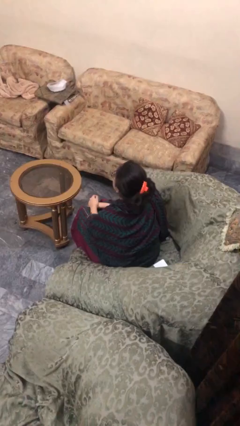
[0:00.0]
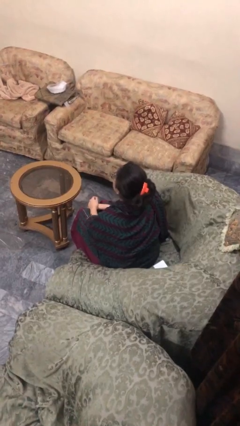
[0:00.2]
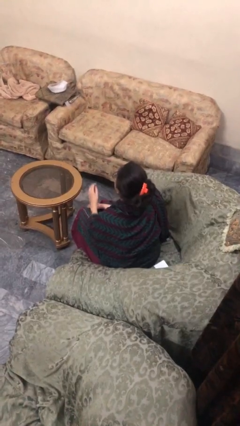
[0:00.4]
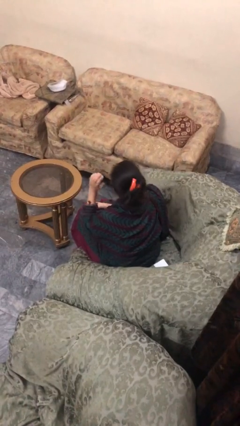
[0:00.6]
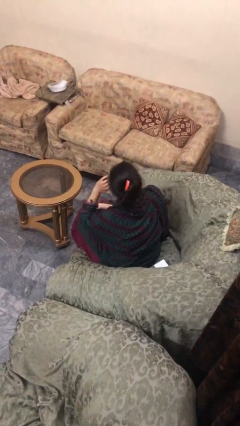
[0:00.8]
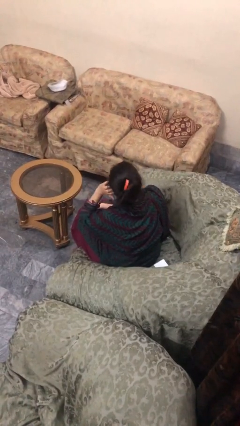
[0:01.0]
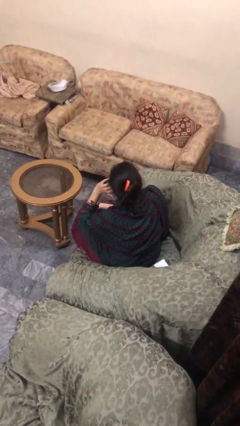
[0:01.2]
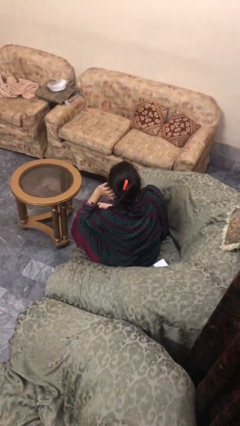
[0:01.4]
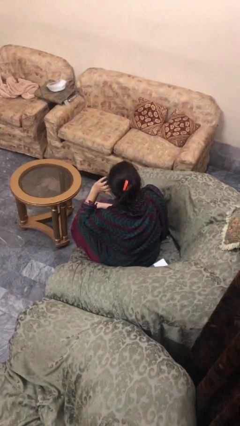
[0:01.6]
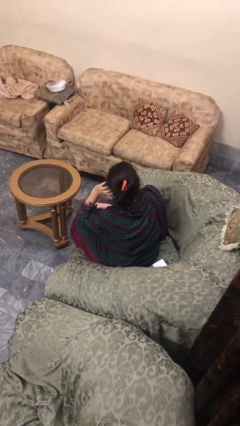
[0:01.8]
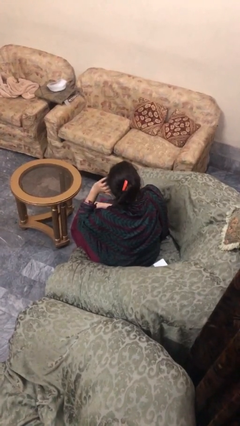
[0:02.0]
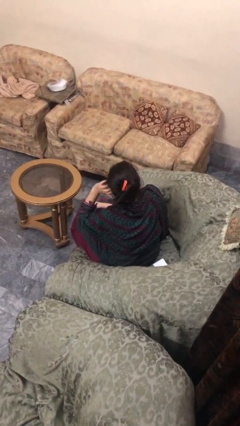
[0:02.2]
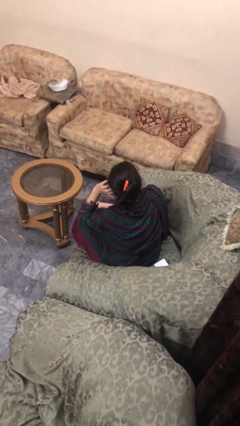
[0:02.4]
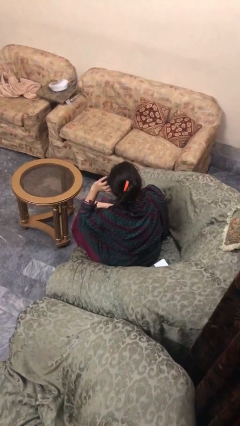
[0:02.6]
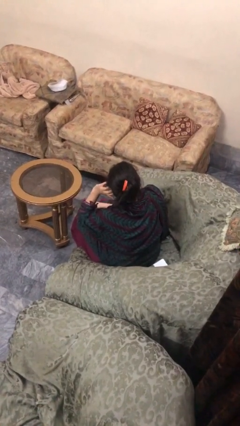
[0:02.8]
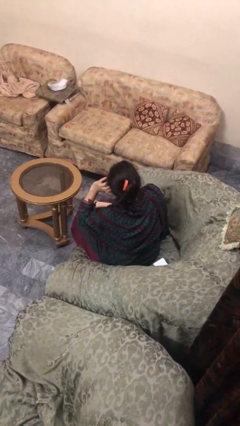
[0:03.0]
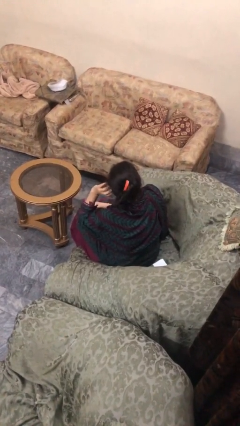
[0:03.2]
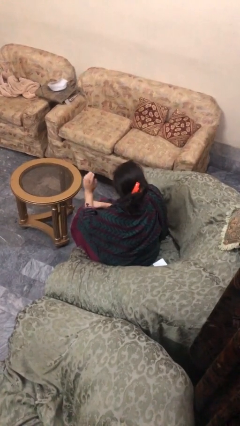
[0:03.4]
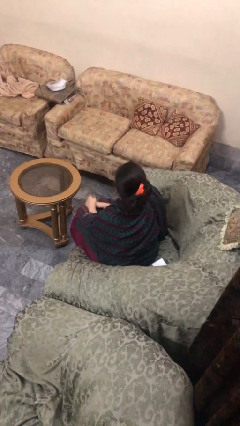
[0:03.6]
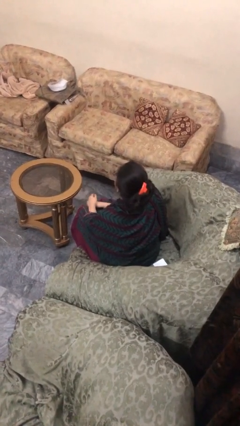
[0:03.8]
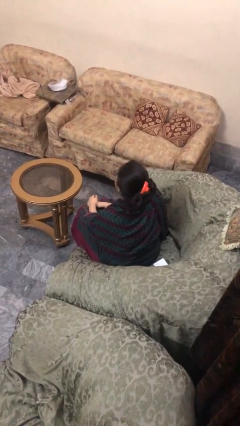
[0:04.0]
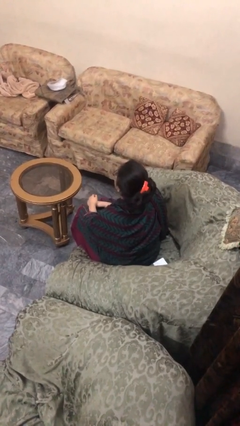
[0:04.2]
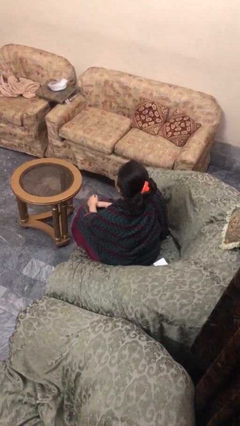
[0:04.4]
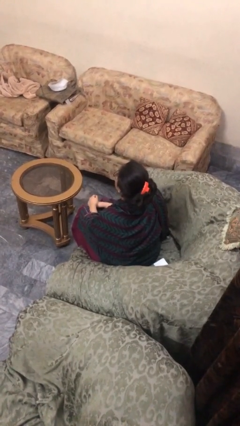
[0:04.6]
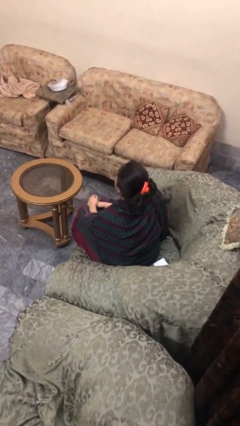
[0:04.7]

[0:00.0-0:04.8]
person strokes hair

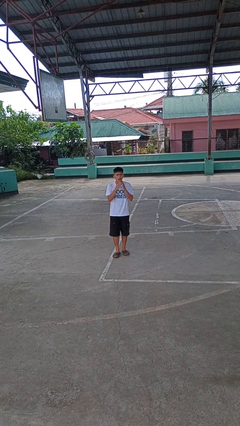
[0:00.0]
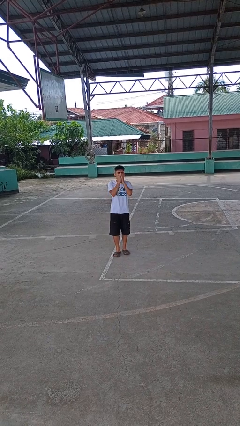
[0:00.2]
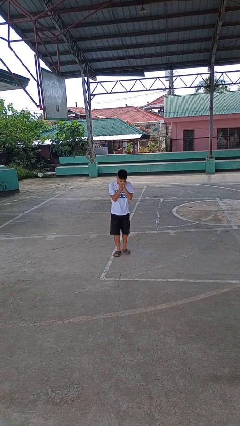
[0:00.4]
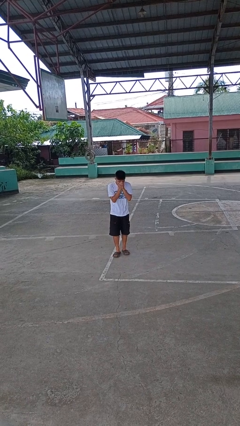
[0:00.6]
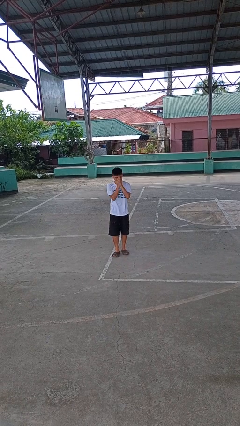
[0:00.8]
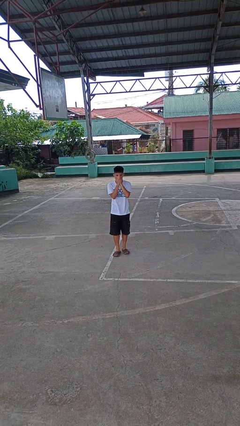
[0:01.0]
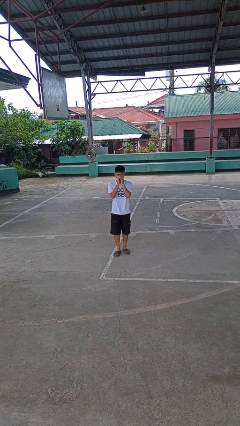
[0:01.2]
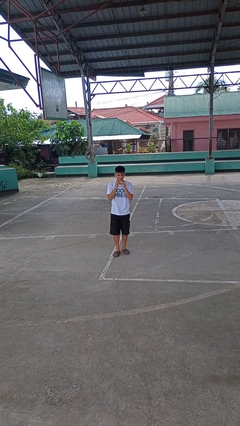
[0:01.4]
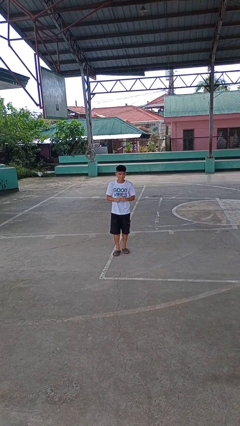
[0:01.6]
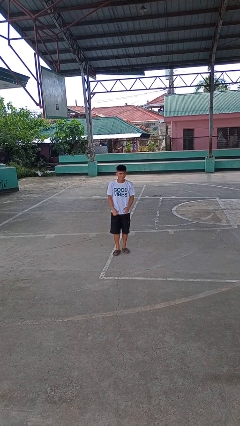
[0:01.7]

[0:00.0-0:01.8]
person sneezes into hand

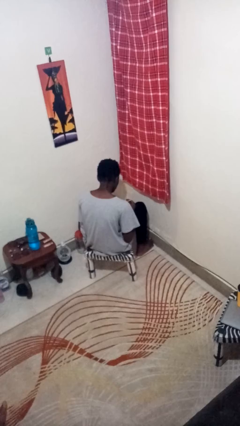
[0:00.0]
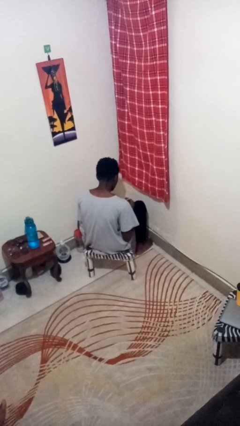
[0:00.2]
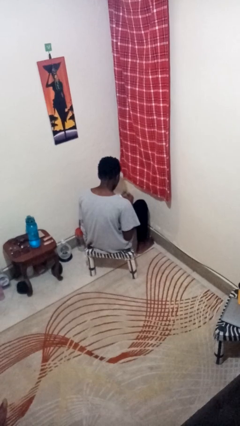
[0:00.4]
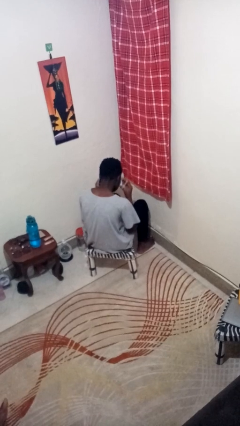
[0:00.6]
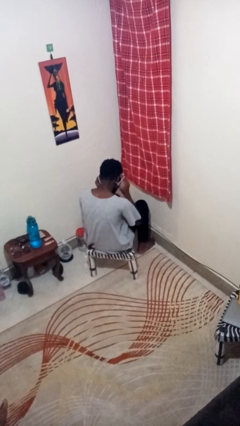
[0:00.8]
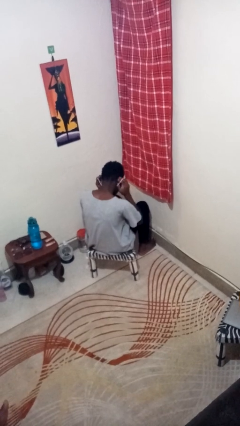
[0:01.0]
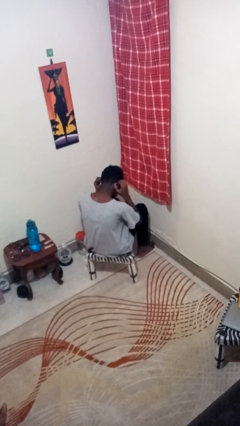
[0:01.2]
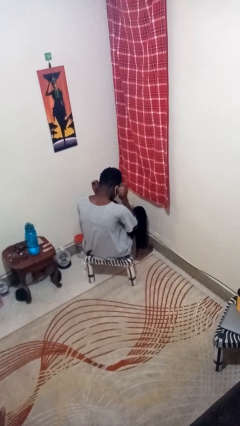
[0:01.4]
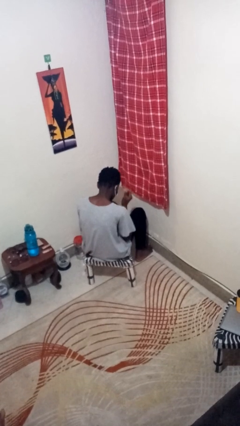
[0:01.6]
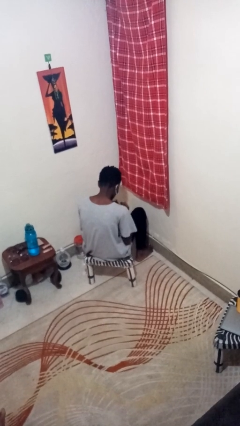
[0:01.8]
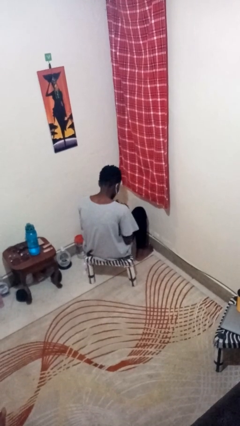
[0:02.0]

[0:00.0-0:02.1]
person puts on facemask

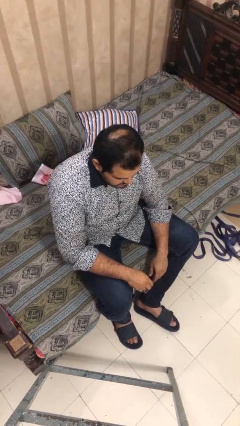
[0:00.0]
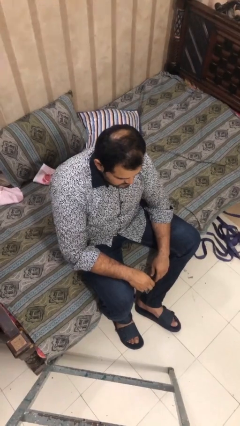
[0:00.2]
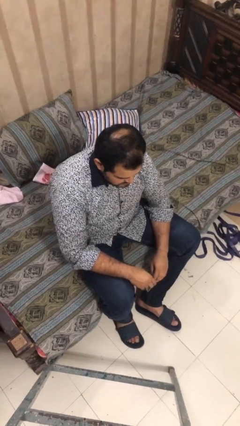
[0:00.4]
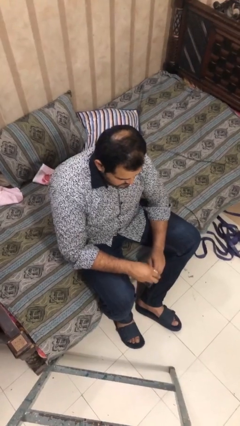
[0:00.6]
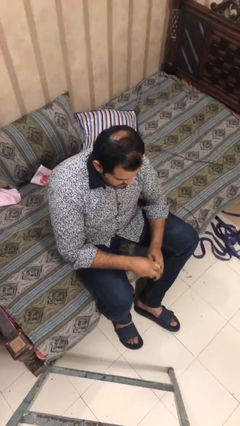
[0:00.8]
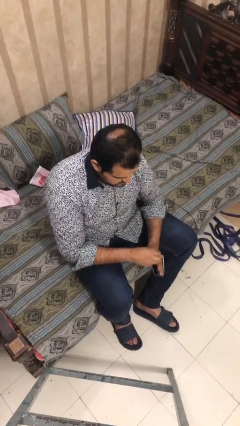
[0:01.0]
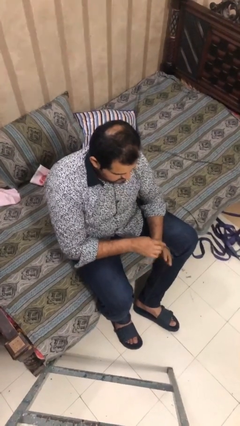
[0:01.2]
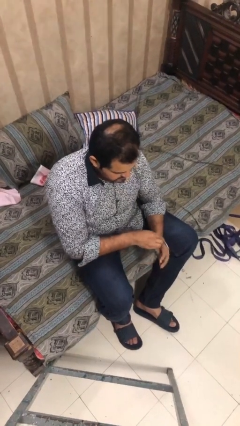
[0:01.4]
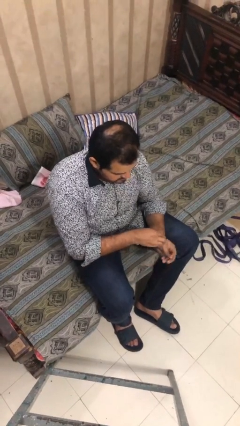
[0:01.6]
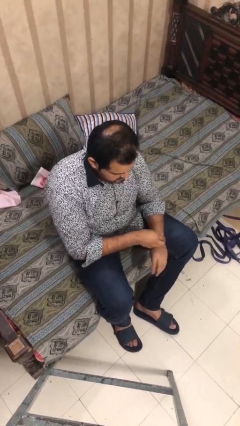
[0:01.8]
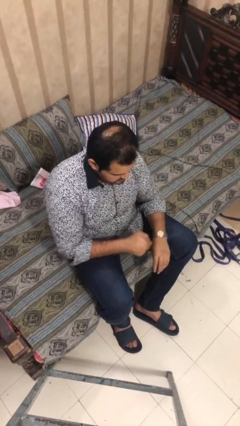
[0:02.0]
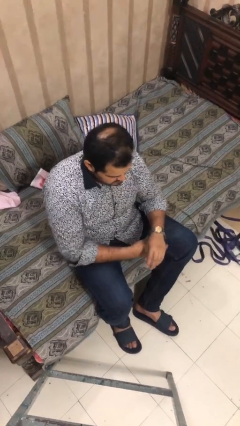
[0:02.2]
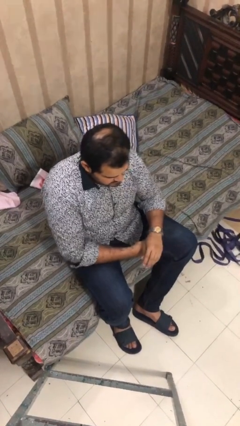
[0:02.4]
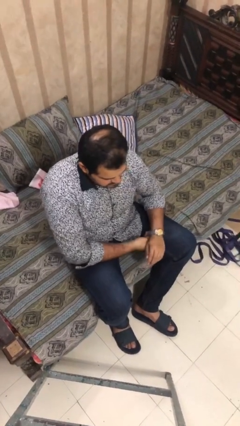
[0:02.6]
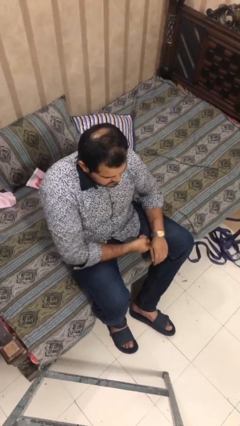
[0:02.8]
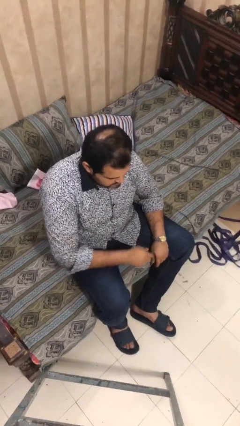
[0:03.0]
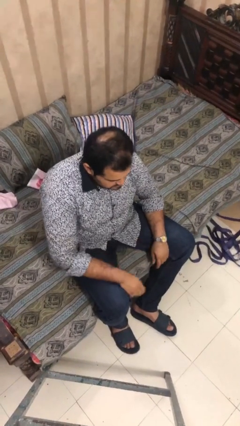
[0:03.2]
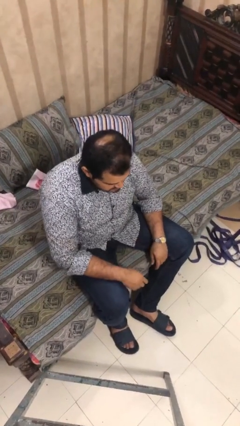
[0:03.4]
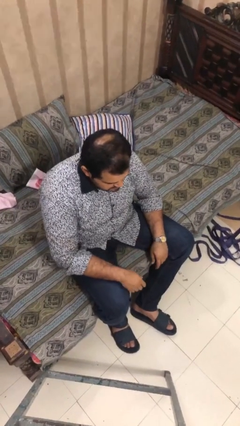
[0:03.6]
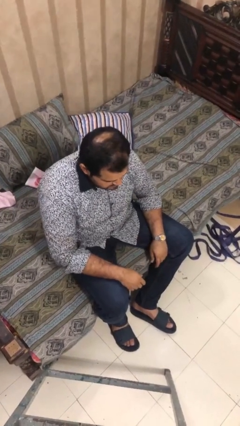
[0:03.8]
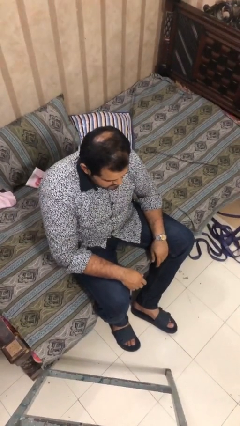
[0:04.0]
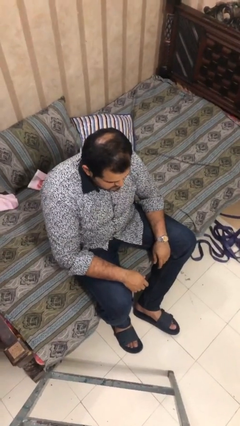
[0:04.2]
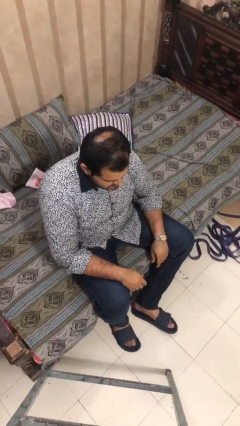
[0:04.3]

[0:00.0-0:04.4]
person puts on wristwatch

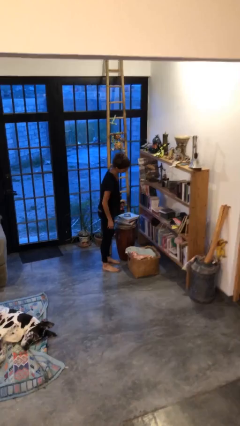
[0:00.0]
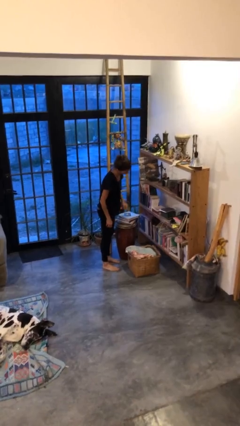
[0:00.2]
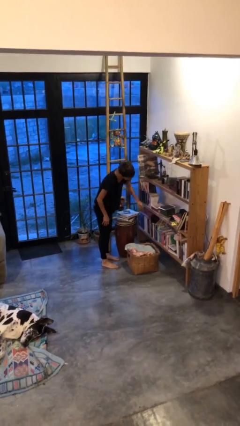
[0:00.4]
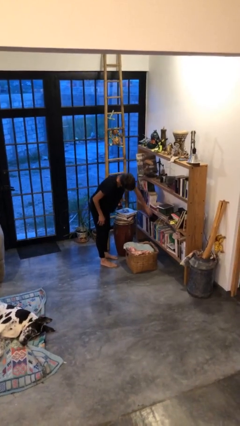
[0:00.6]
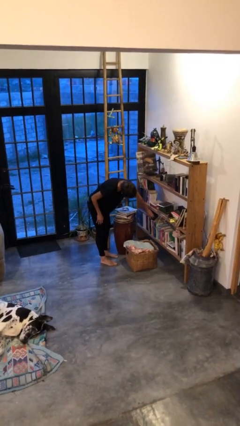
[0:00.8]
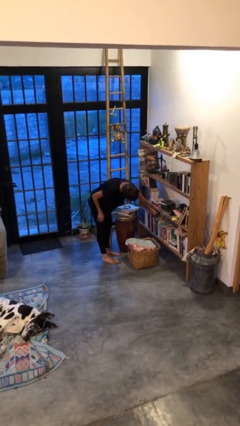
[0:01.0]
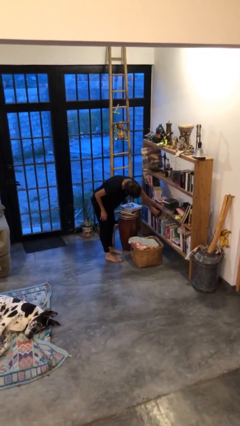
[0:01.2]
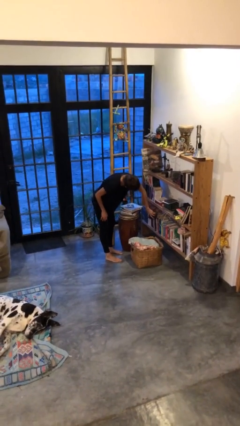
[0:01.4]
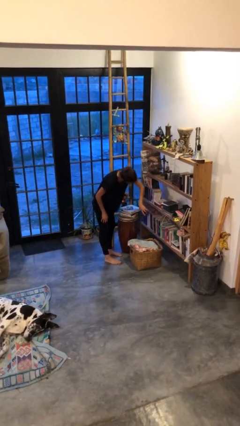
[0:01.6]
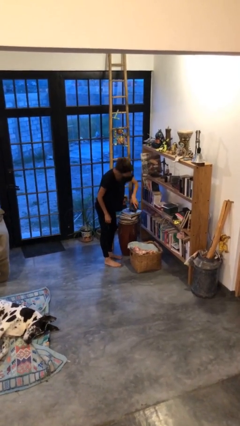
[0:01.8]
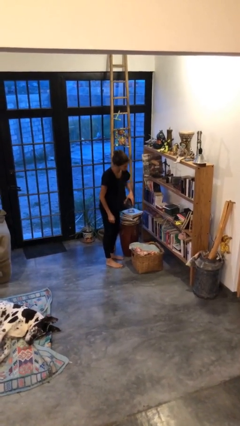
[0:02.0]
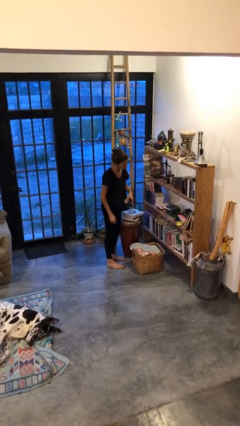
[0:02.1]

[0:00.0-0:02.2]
person picks up object from cabinet

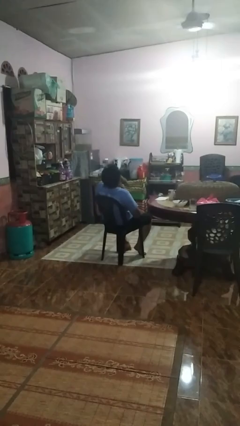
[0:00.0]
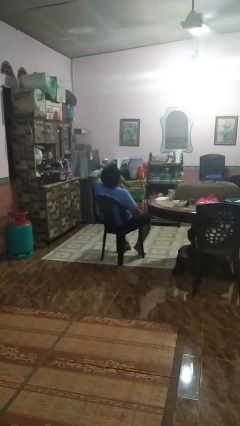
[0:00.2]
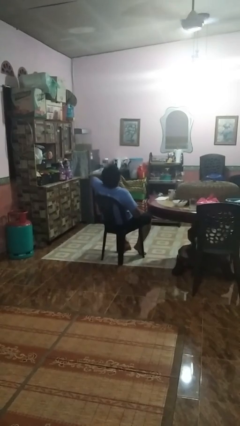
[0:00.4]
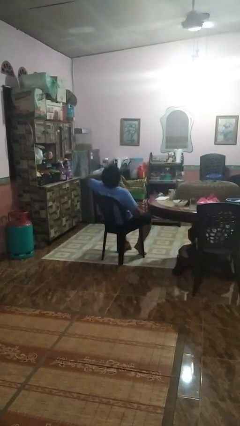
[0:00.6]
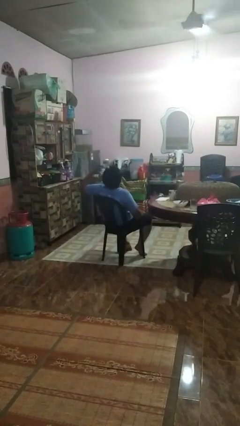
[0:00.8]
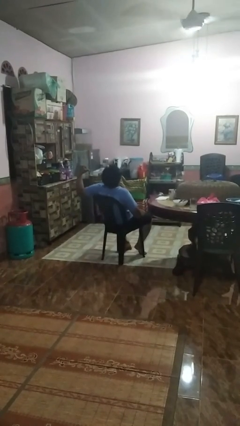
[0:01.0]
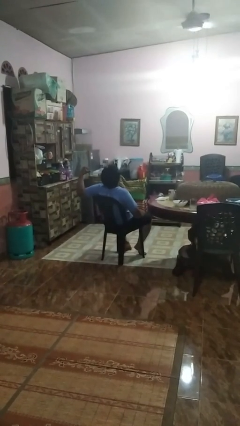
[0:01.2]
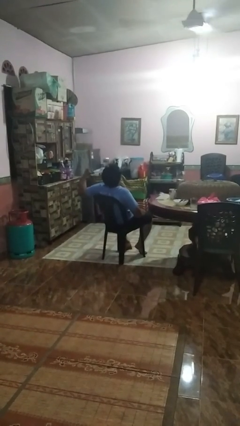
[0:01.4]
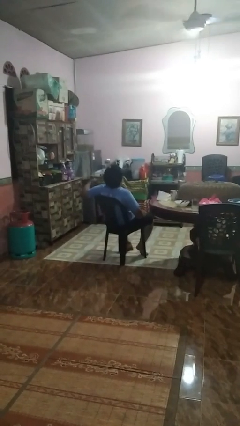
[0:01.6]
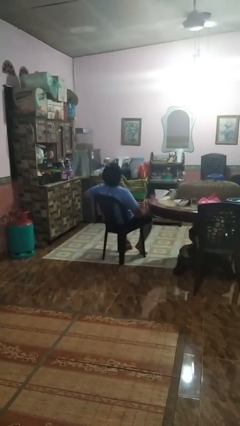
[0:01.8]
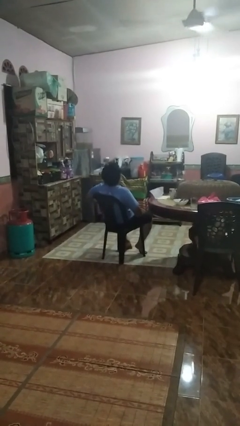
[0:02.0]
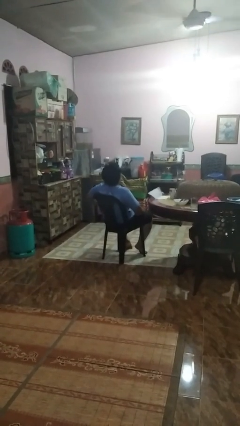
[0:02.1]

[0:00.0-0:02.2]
person gestures cut
